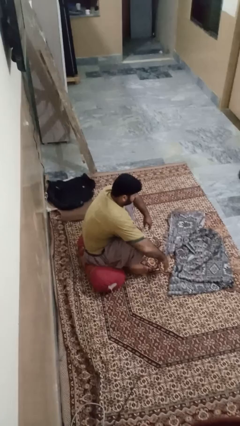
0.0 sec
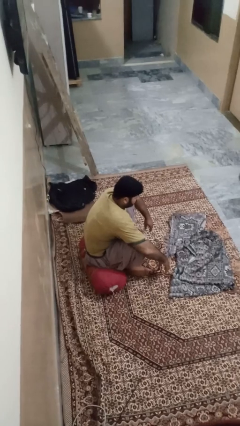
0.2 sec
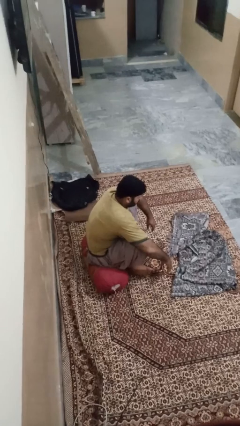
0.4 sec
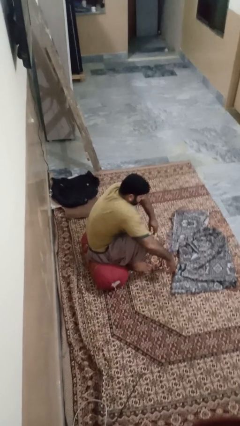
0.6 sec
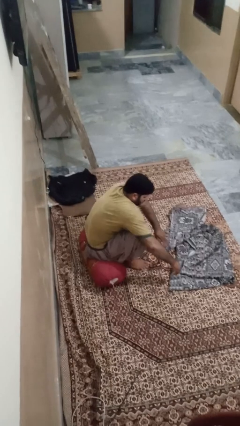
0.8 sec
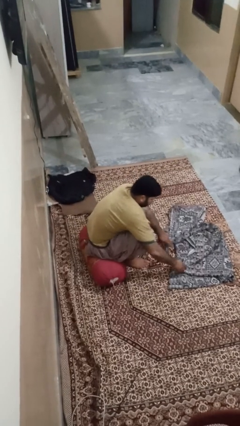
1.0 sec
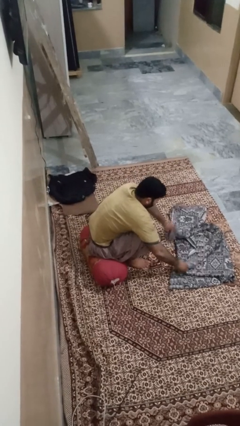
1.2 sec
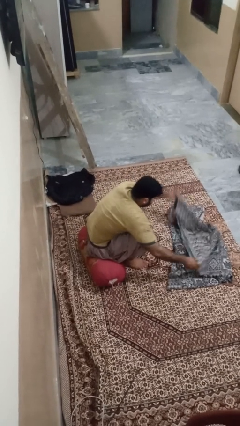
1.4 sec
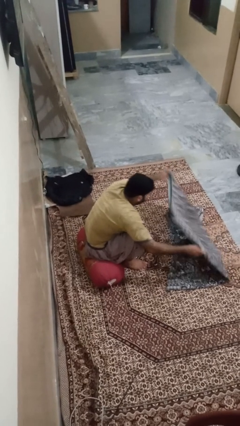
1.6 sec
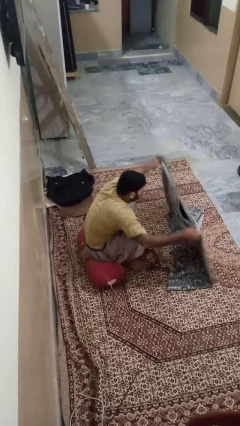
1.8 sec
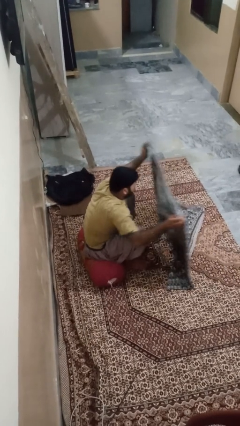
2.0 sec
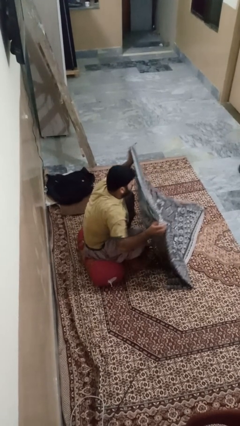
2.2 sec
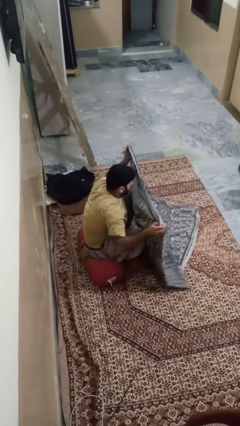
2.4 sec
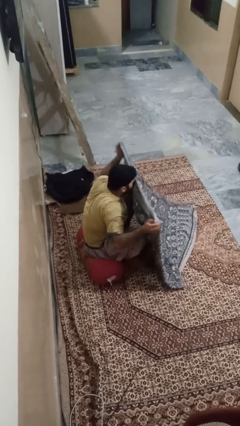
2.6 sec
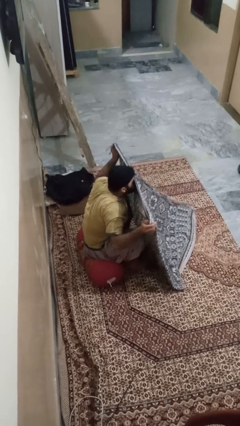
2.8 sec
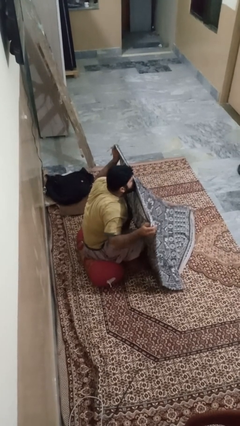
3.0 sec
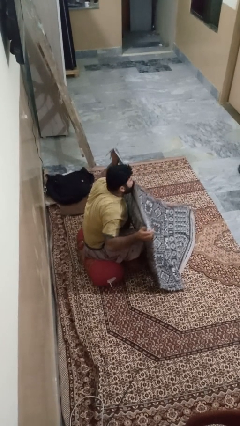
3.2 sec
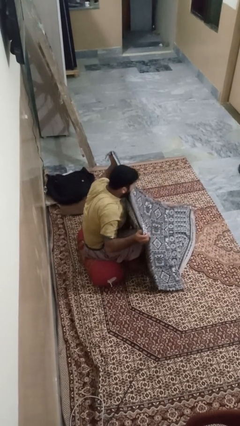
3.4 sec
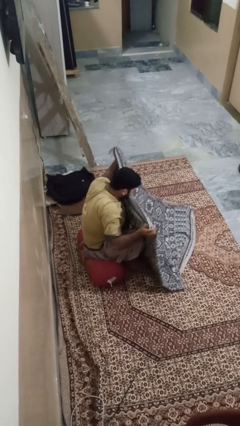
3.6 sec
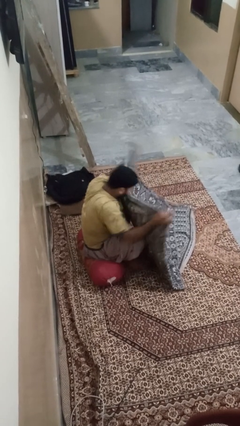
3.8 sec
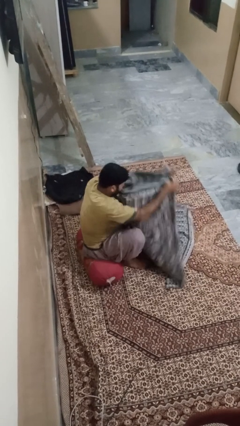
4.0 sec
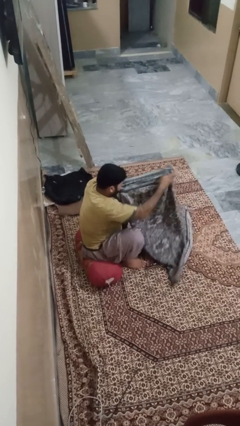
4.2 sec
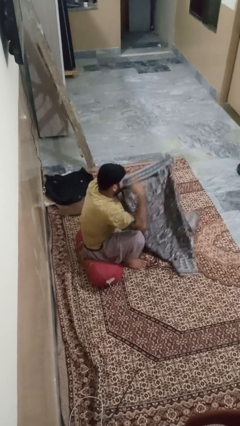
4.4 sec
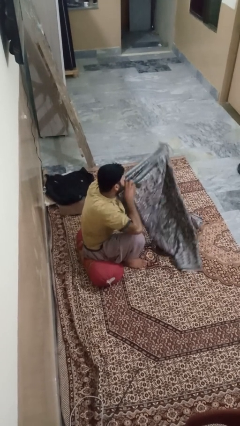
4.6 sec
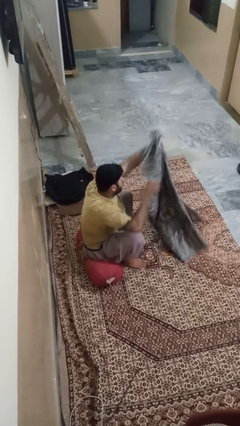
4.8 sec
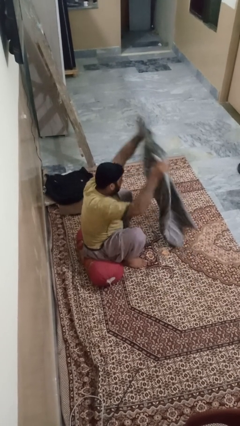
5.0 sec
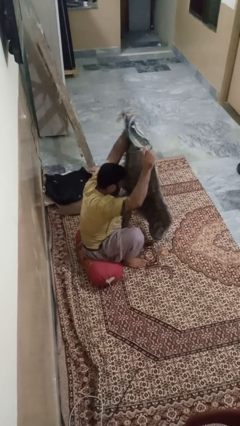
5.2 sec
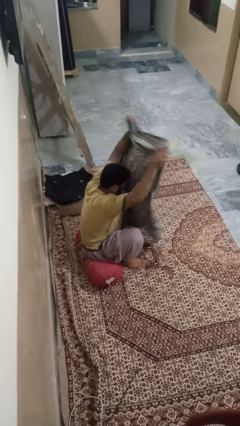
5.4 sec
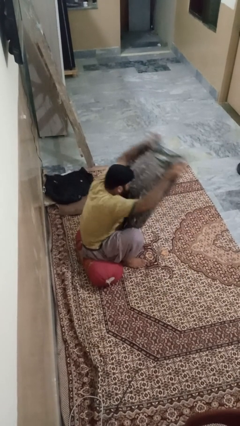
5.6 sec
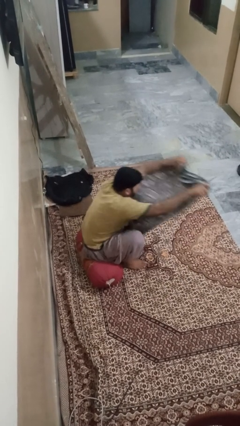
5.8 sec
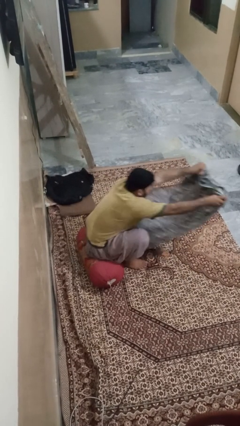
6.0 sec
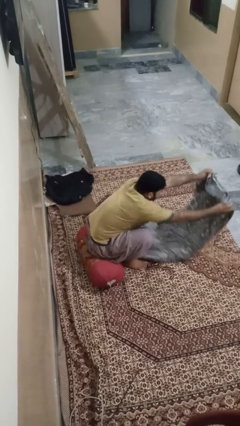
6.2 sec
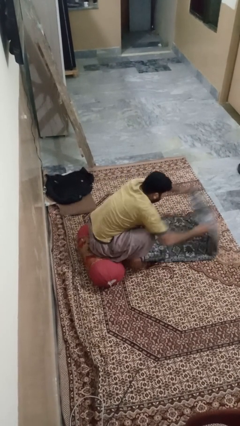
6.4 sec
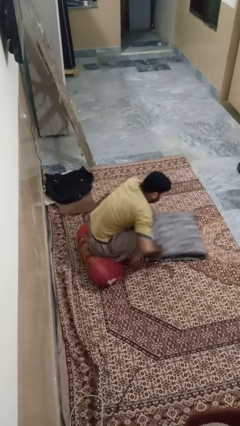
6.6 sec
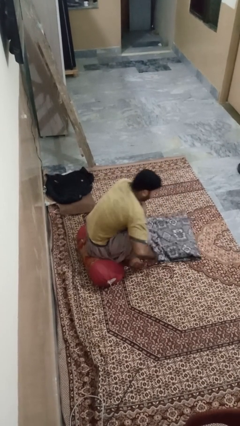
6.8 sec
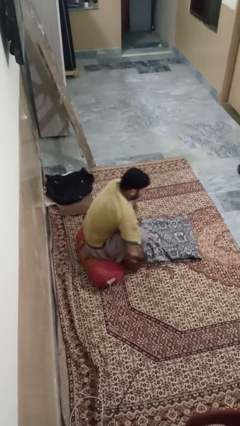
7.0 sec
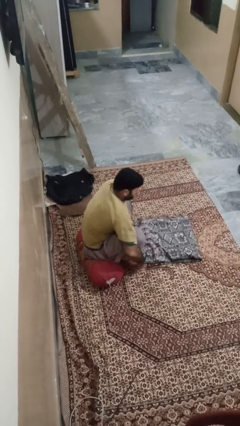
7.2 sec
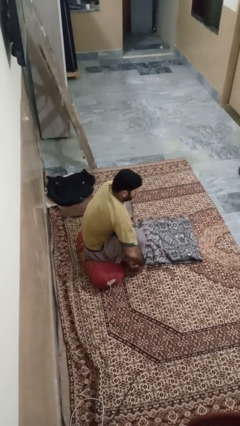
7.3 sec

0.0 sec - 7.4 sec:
person folds blanket

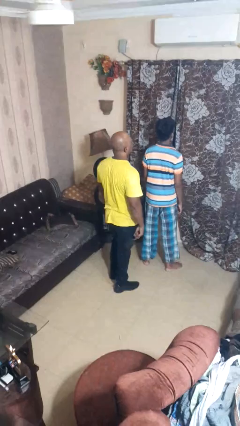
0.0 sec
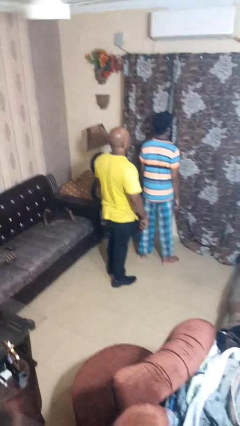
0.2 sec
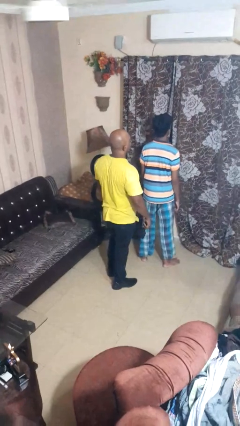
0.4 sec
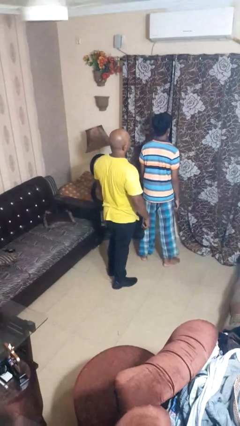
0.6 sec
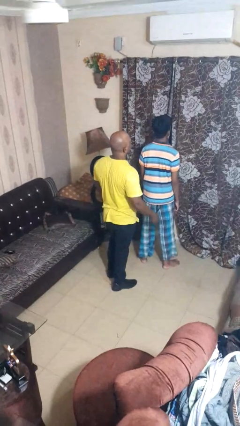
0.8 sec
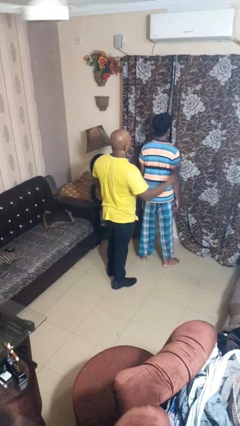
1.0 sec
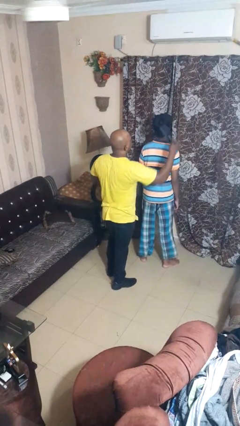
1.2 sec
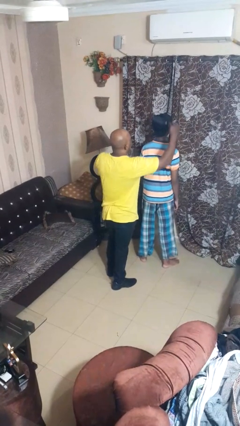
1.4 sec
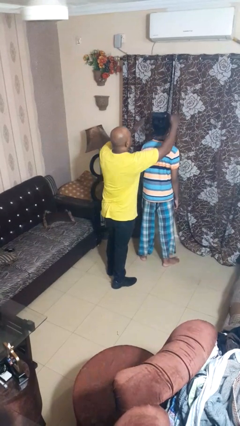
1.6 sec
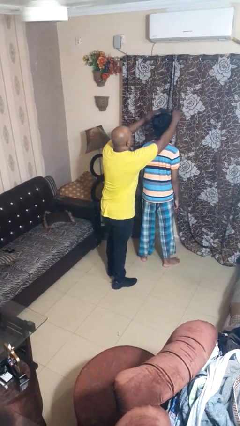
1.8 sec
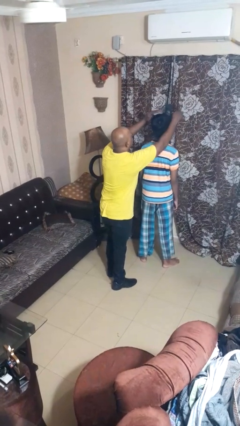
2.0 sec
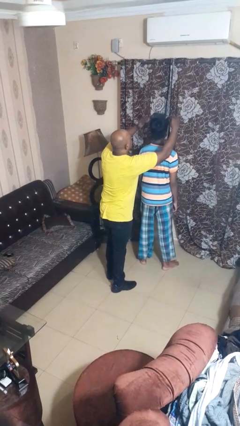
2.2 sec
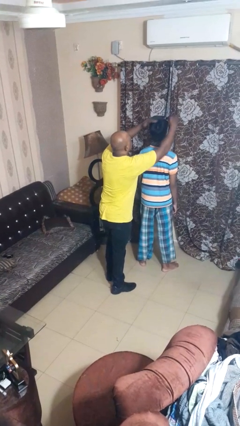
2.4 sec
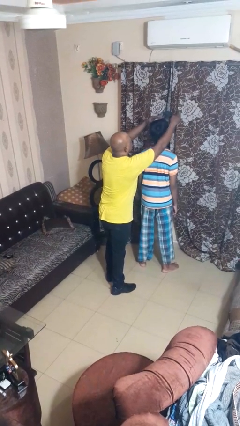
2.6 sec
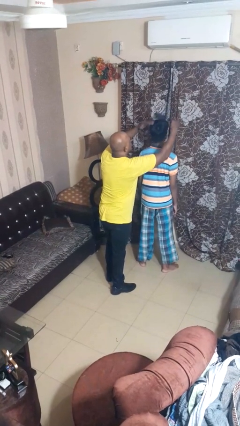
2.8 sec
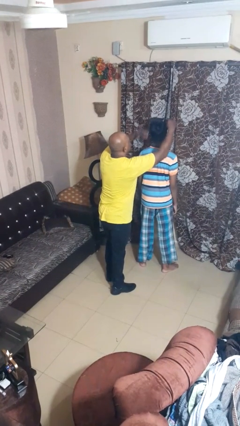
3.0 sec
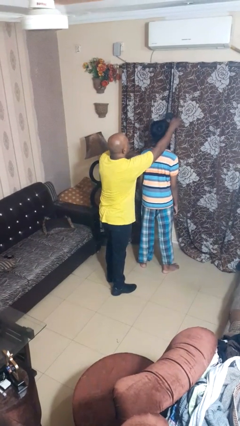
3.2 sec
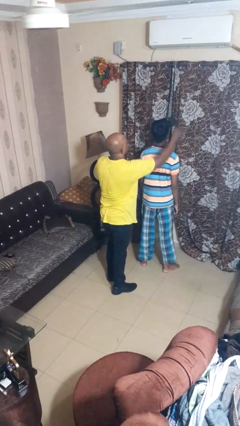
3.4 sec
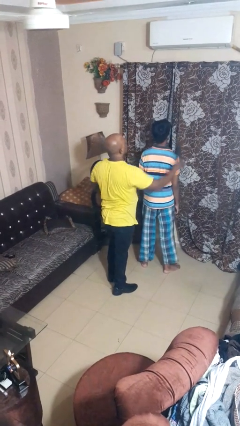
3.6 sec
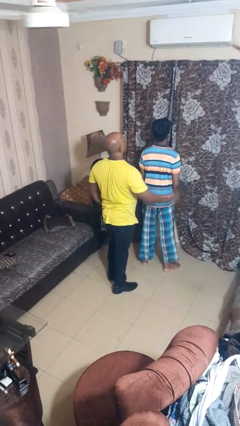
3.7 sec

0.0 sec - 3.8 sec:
person brushes hair of person

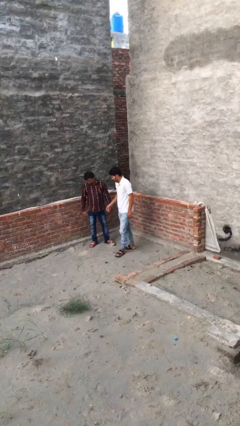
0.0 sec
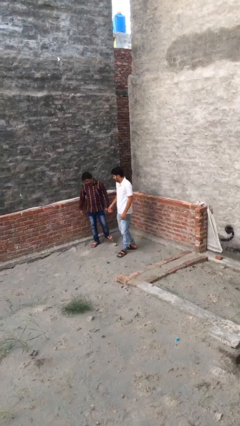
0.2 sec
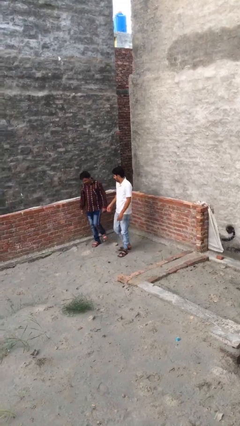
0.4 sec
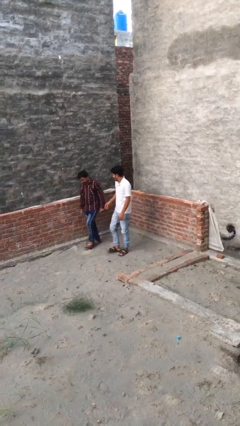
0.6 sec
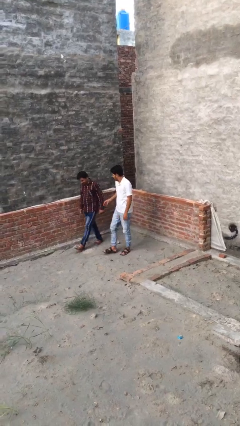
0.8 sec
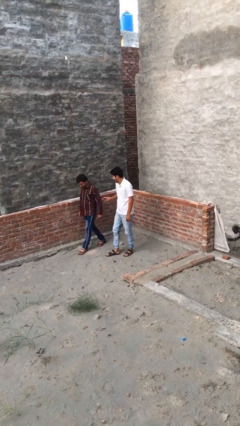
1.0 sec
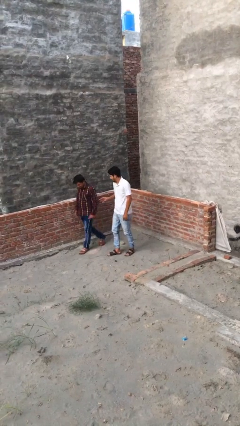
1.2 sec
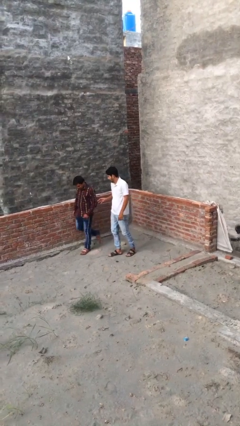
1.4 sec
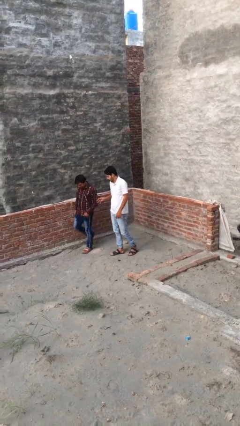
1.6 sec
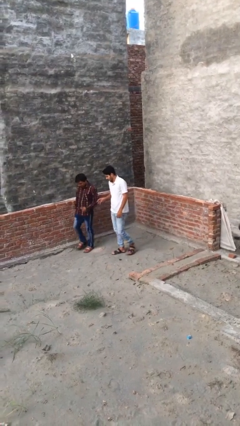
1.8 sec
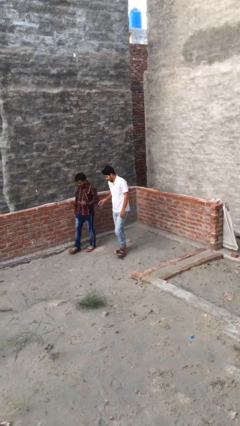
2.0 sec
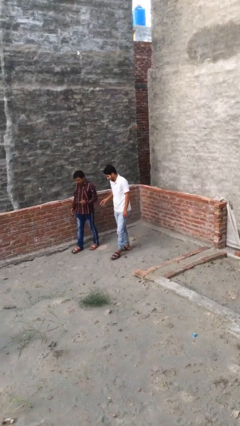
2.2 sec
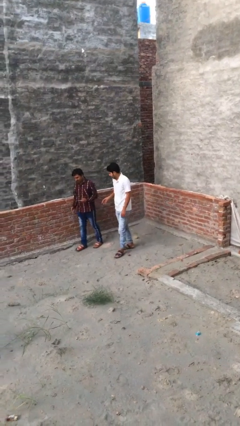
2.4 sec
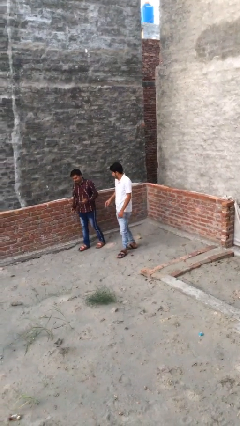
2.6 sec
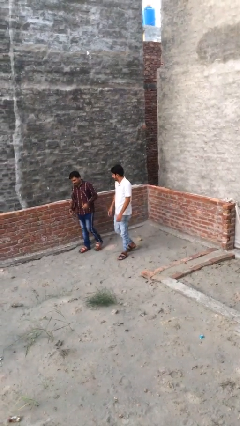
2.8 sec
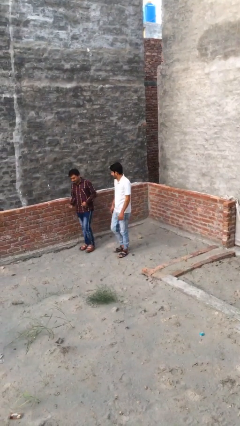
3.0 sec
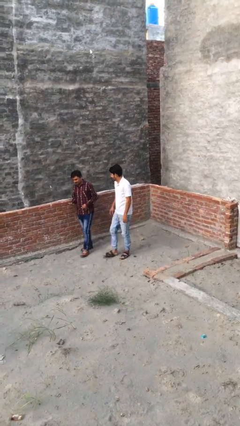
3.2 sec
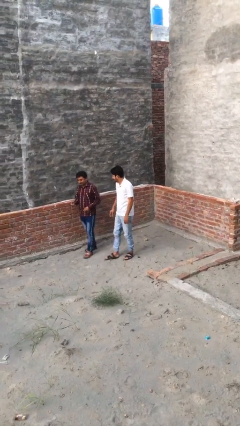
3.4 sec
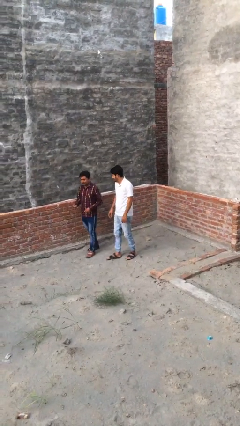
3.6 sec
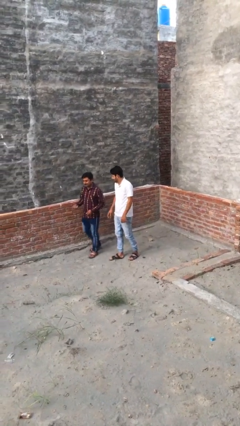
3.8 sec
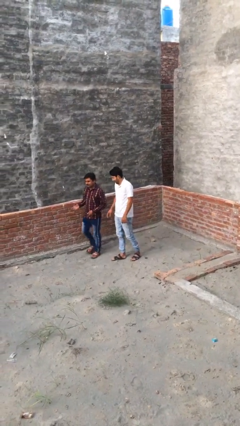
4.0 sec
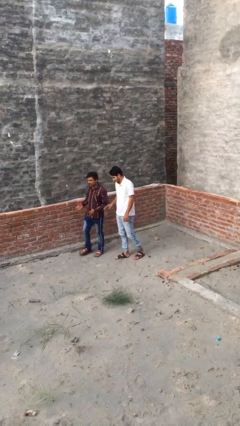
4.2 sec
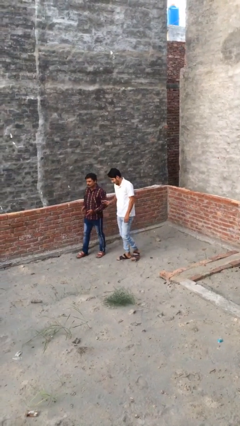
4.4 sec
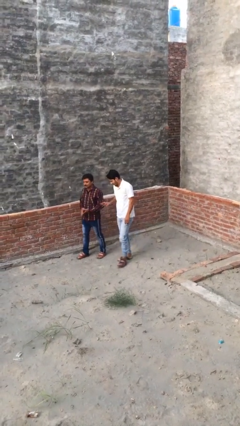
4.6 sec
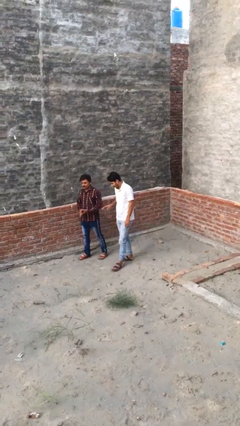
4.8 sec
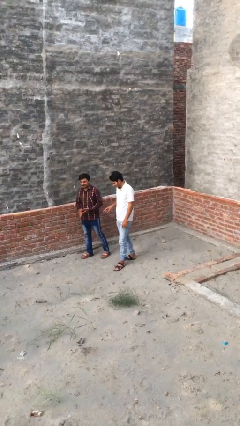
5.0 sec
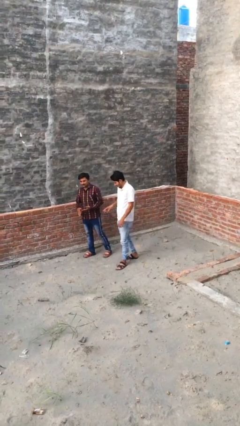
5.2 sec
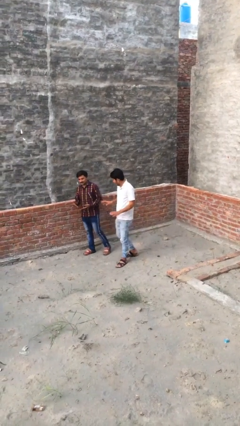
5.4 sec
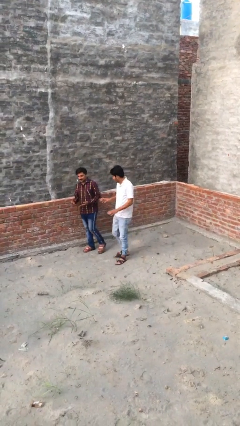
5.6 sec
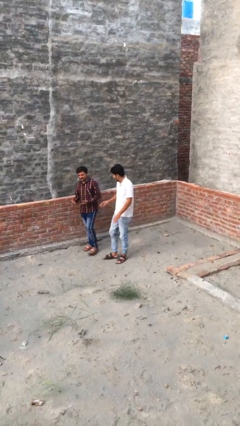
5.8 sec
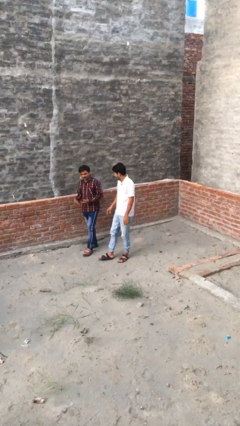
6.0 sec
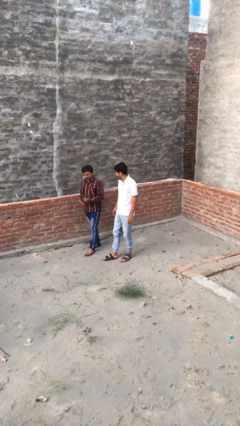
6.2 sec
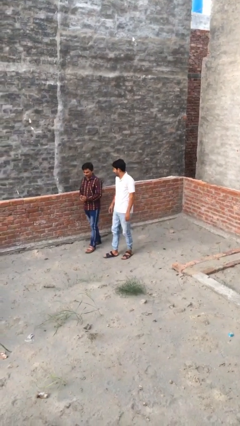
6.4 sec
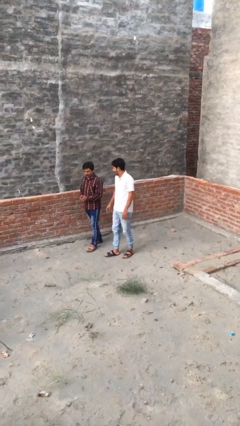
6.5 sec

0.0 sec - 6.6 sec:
person talks to person
